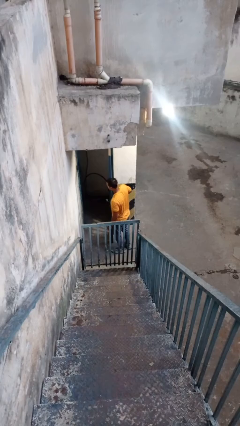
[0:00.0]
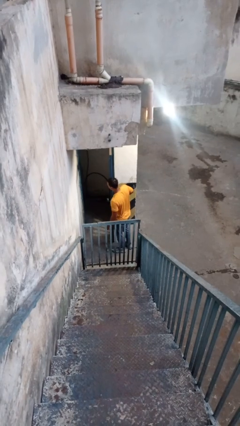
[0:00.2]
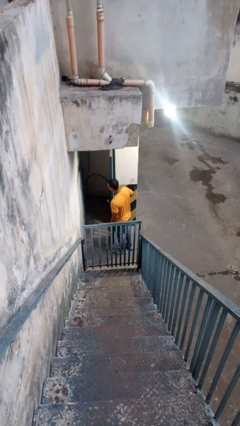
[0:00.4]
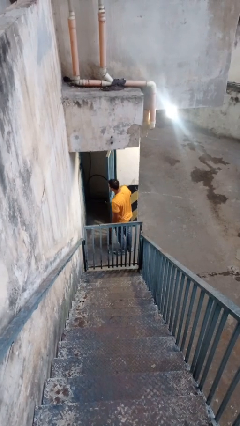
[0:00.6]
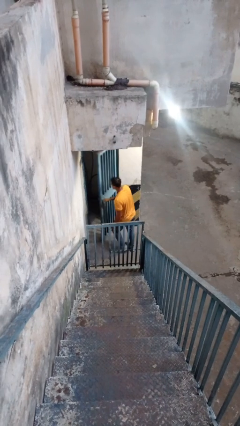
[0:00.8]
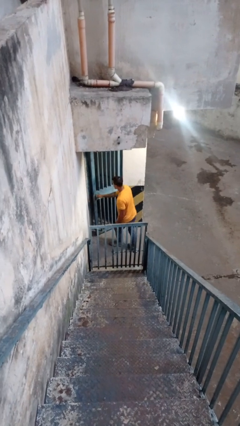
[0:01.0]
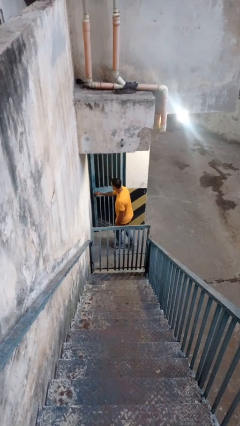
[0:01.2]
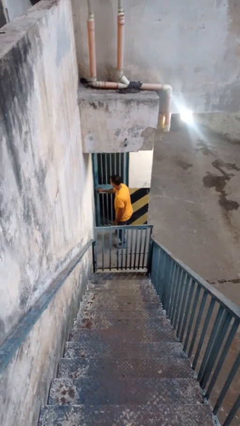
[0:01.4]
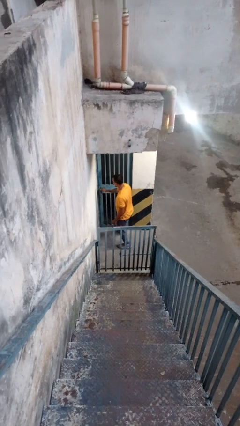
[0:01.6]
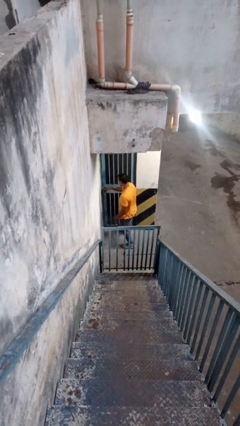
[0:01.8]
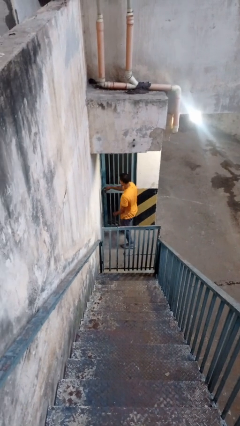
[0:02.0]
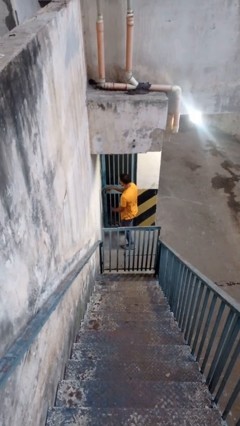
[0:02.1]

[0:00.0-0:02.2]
person closes facility door

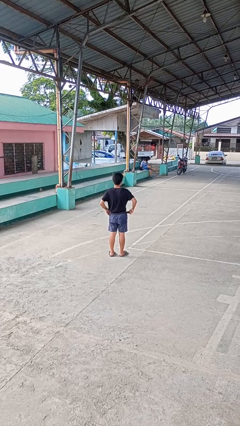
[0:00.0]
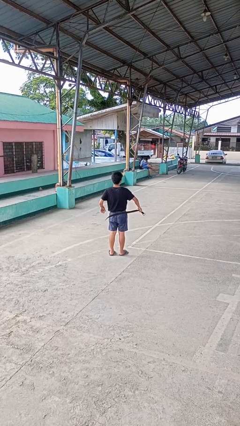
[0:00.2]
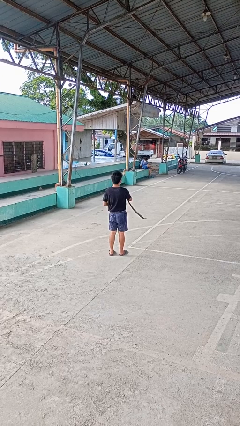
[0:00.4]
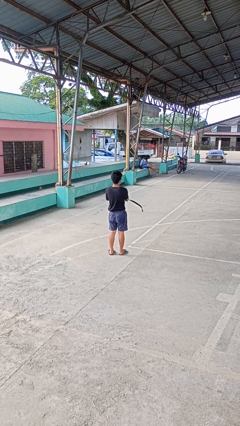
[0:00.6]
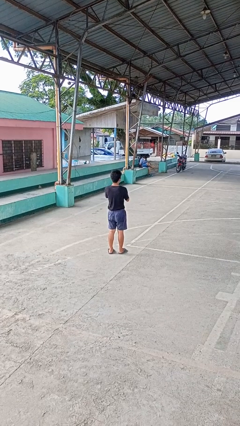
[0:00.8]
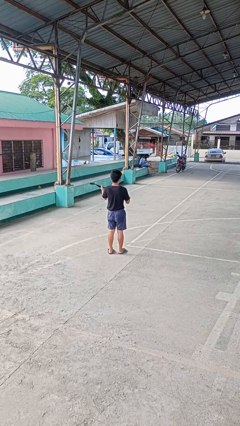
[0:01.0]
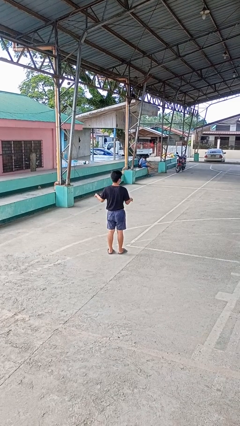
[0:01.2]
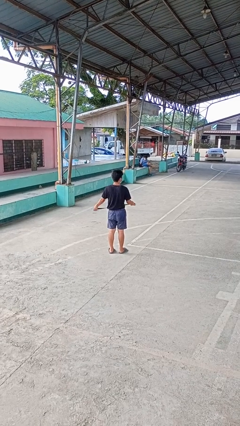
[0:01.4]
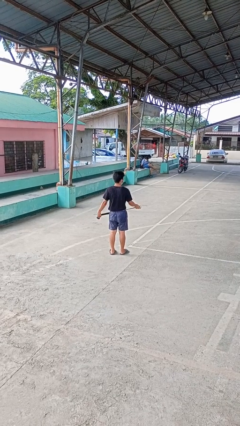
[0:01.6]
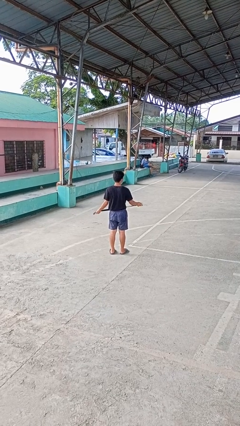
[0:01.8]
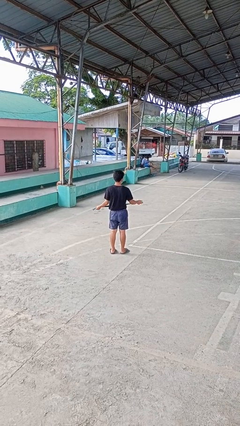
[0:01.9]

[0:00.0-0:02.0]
person takes off belt

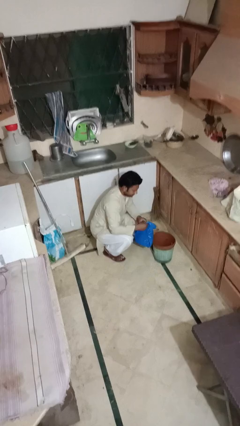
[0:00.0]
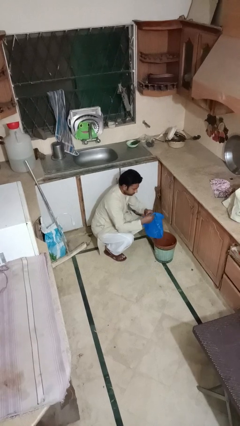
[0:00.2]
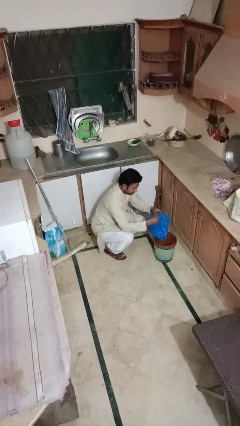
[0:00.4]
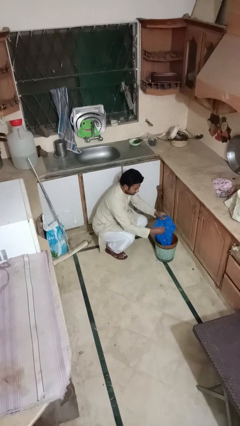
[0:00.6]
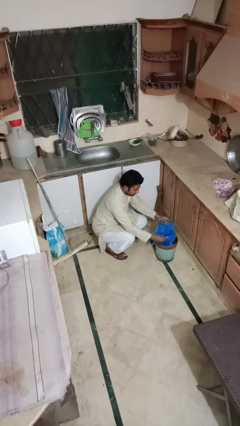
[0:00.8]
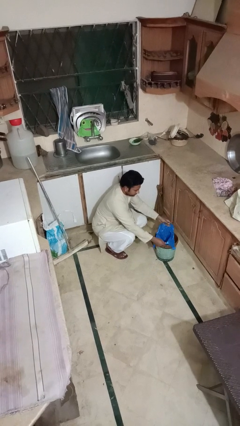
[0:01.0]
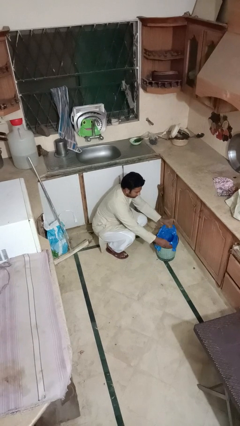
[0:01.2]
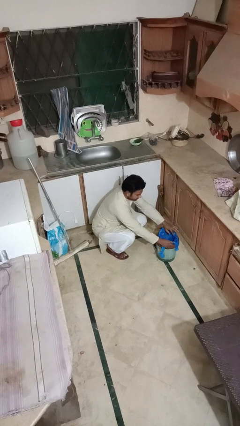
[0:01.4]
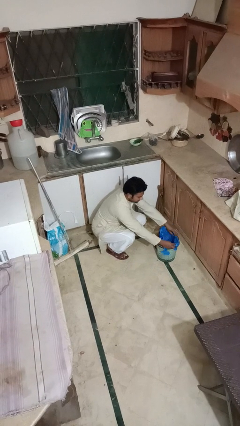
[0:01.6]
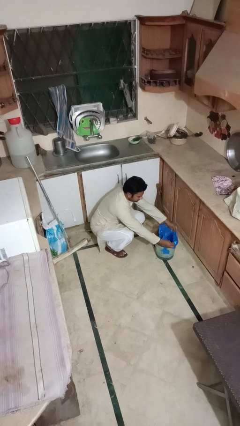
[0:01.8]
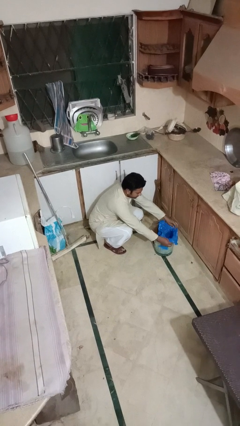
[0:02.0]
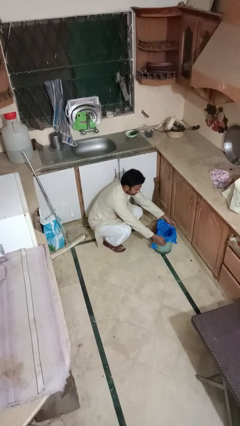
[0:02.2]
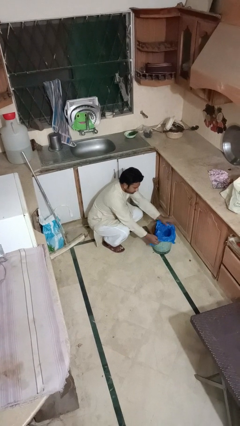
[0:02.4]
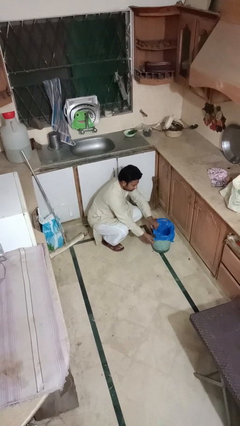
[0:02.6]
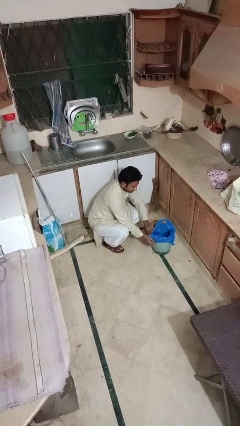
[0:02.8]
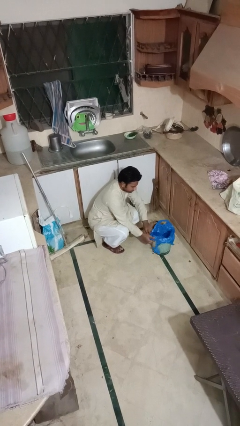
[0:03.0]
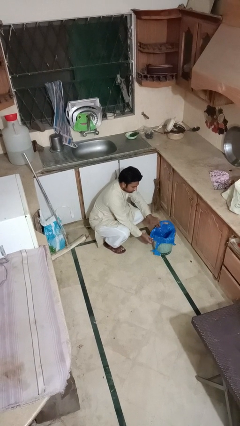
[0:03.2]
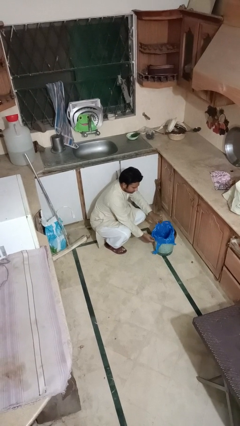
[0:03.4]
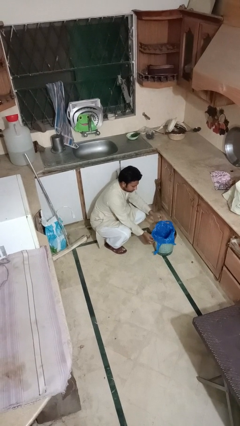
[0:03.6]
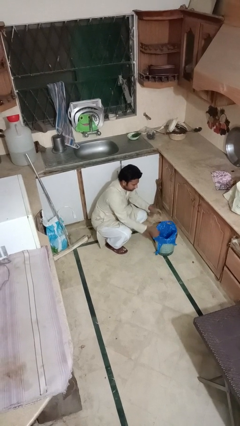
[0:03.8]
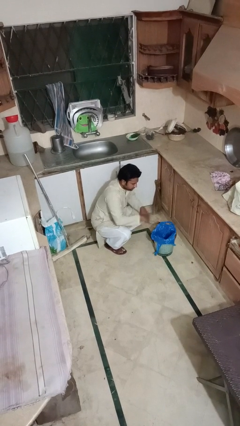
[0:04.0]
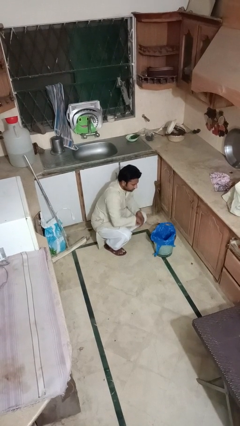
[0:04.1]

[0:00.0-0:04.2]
person inserts trashbag into trashcan

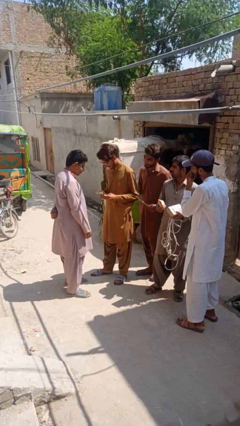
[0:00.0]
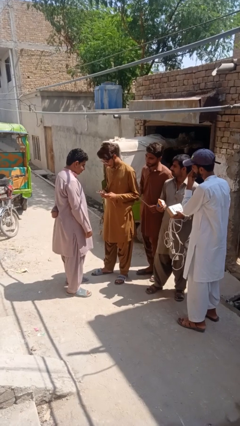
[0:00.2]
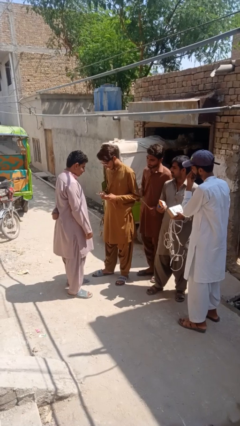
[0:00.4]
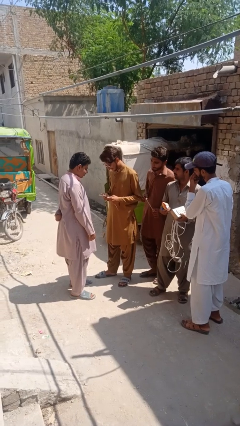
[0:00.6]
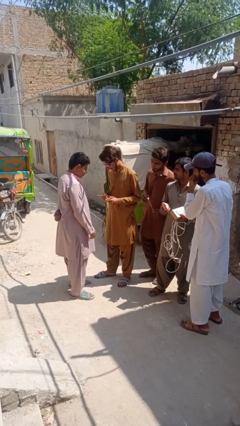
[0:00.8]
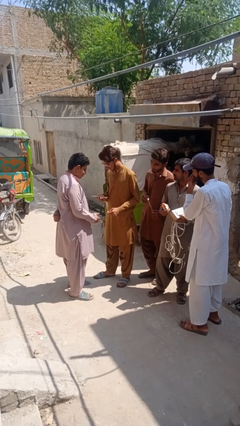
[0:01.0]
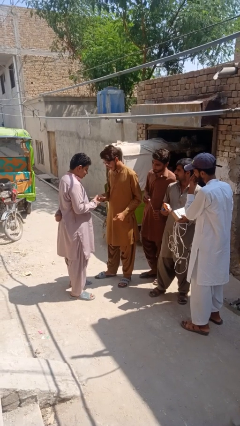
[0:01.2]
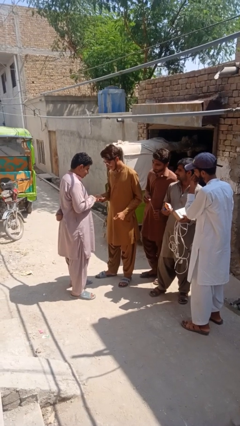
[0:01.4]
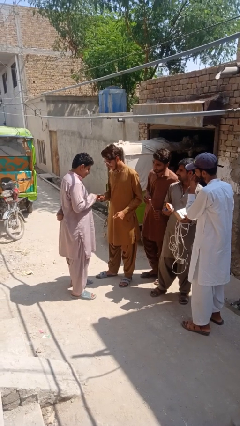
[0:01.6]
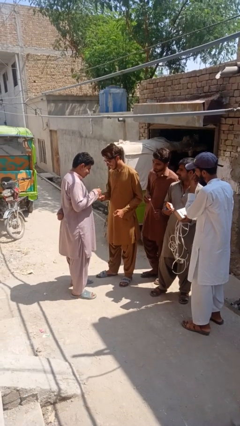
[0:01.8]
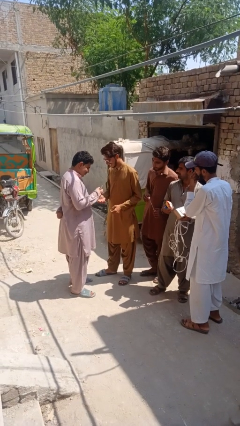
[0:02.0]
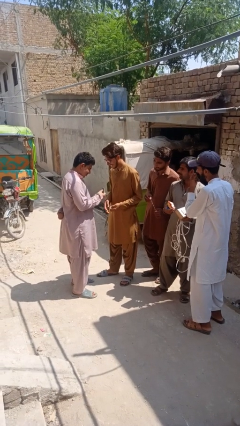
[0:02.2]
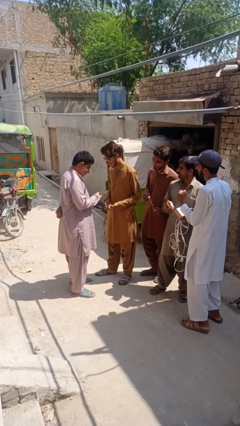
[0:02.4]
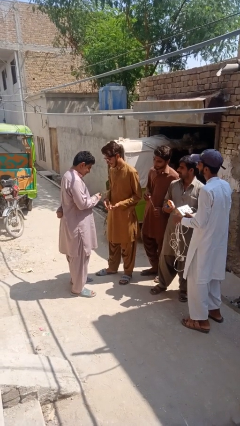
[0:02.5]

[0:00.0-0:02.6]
person transfers object to person

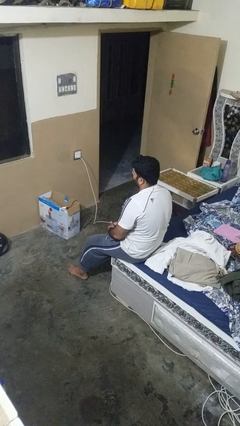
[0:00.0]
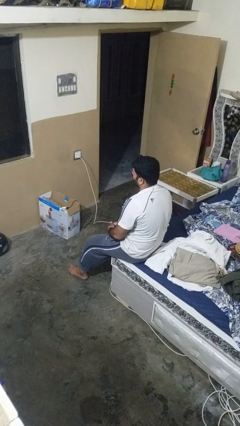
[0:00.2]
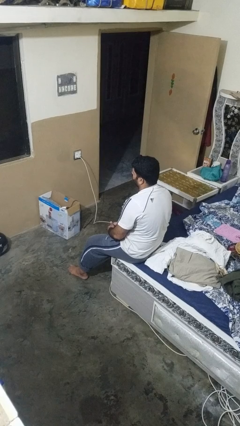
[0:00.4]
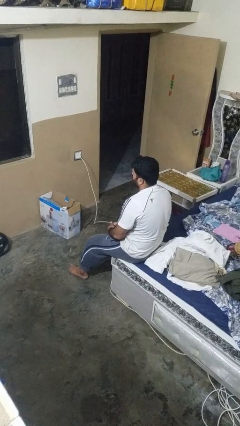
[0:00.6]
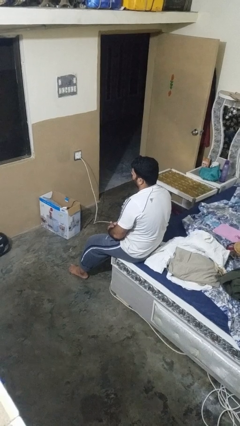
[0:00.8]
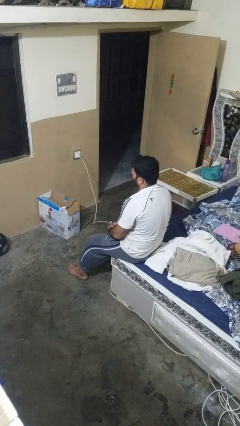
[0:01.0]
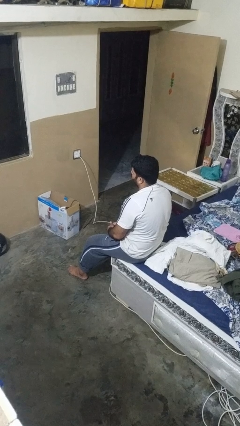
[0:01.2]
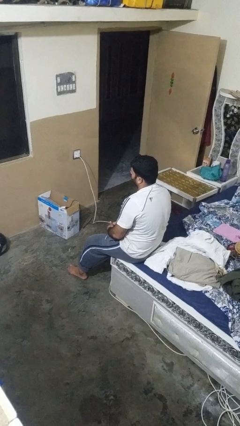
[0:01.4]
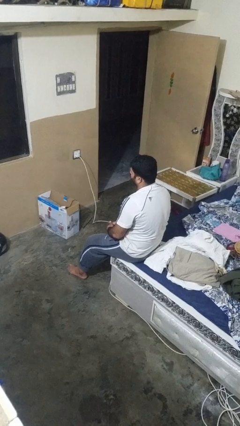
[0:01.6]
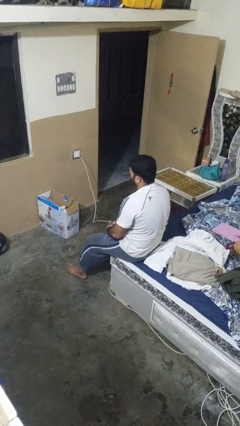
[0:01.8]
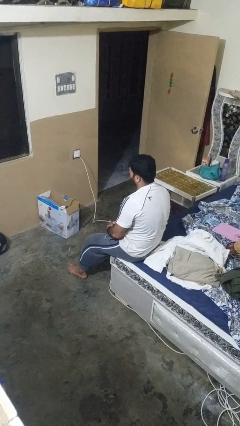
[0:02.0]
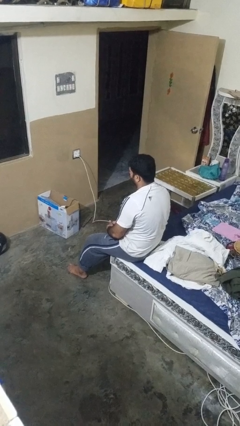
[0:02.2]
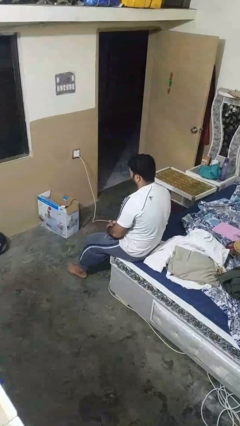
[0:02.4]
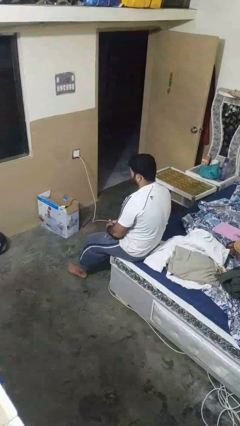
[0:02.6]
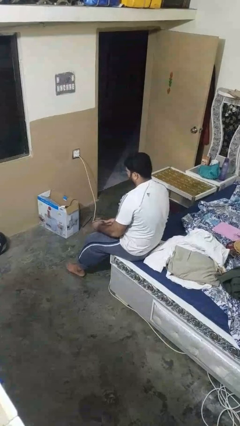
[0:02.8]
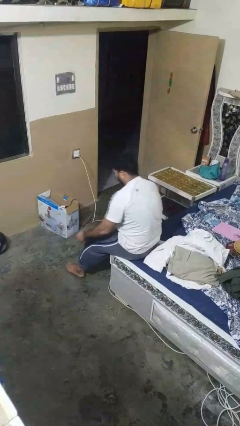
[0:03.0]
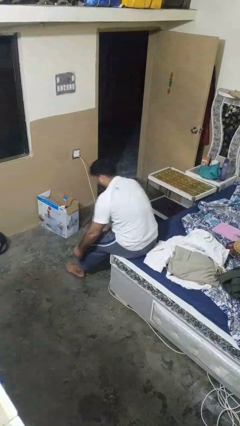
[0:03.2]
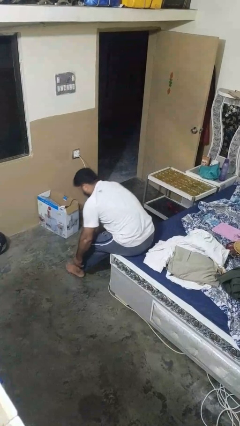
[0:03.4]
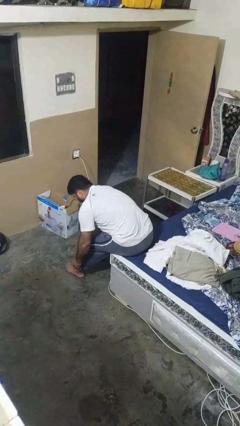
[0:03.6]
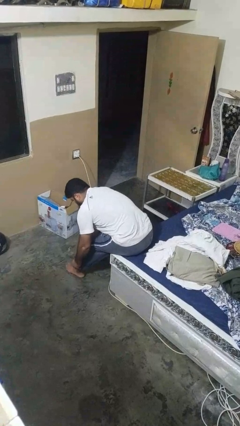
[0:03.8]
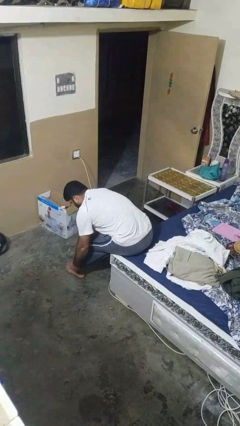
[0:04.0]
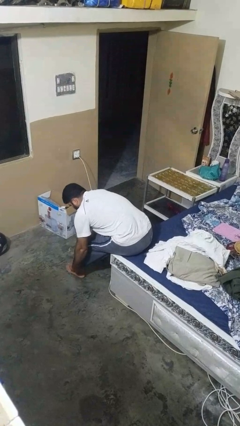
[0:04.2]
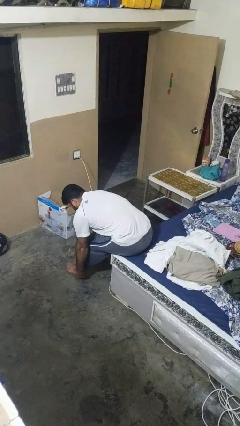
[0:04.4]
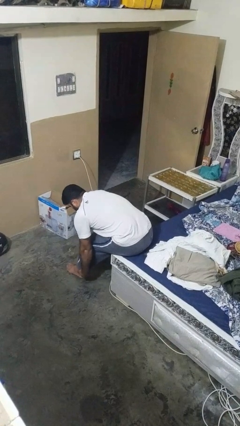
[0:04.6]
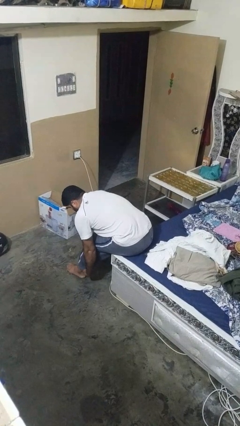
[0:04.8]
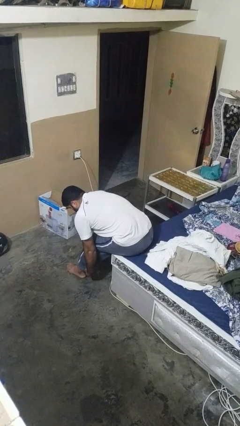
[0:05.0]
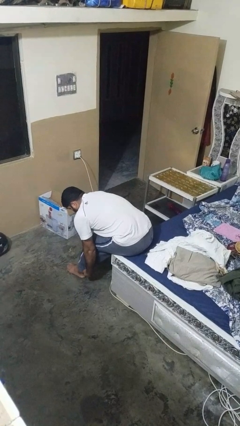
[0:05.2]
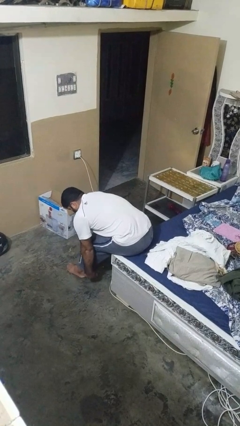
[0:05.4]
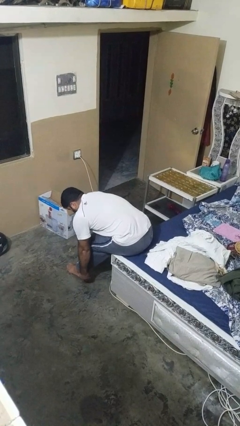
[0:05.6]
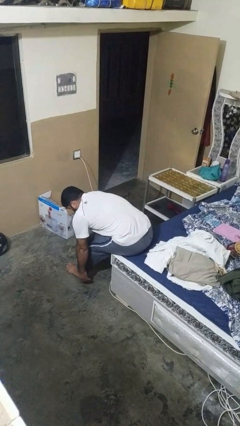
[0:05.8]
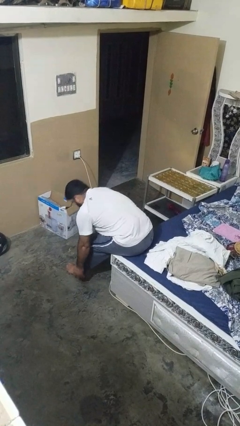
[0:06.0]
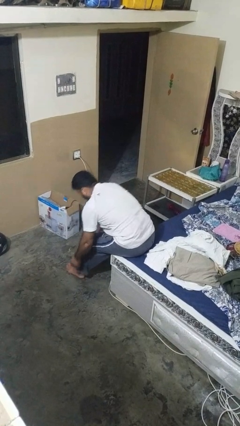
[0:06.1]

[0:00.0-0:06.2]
person hikes up pants

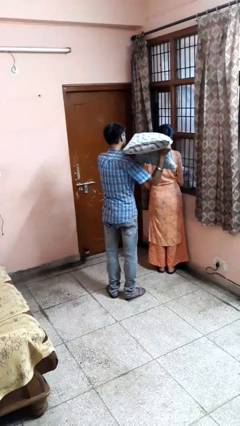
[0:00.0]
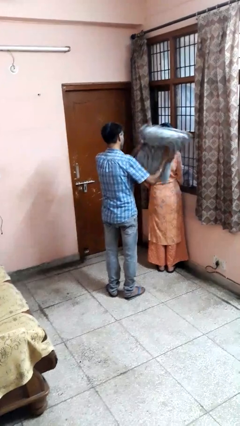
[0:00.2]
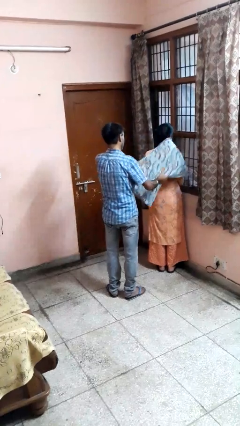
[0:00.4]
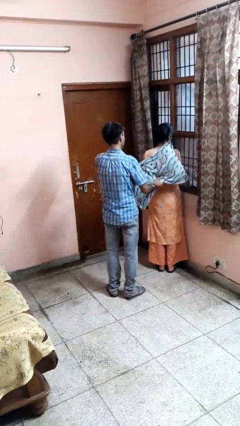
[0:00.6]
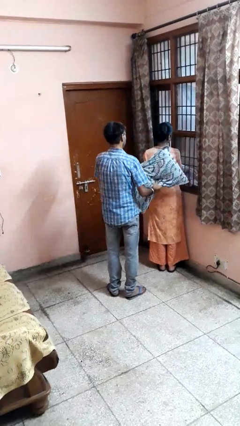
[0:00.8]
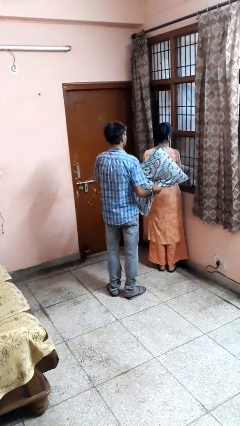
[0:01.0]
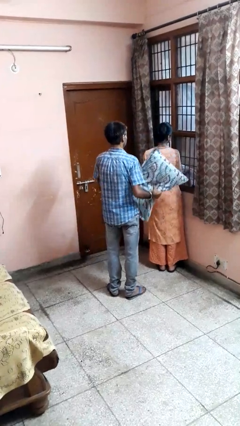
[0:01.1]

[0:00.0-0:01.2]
person hits person with pillow
